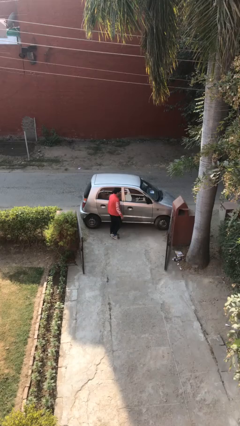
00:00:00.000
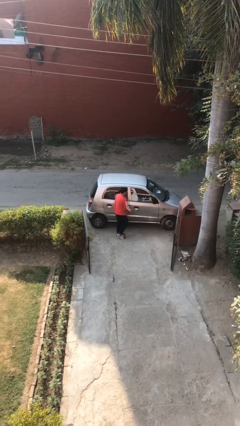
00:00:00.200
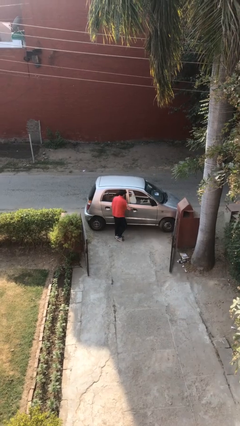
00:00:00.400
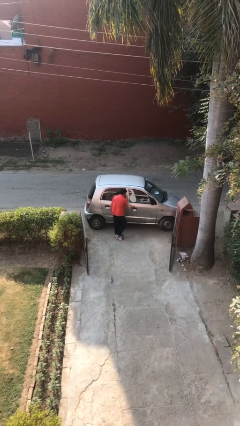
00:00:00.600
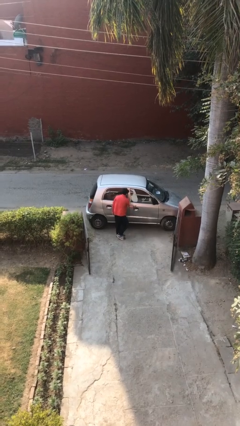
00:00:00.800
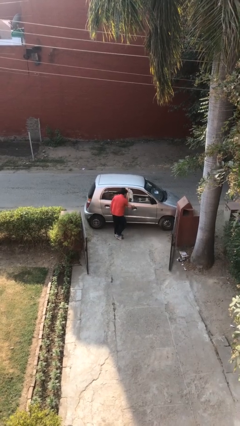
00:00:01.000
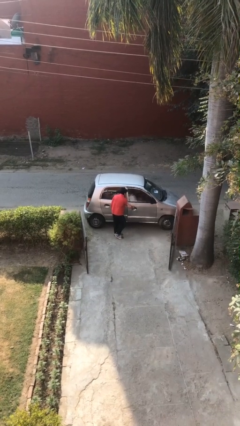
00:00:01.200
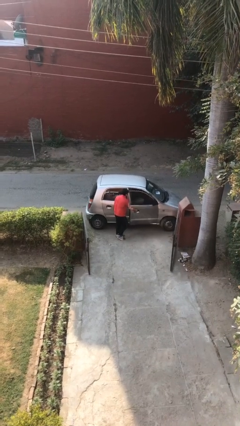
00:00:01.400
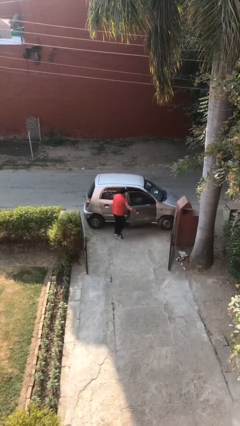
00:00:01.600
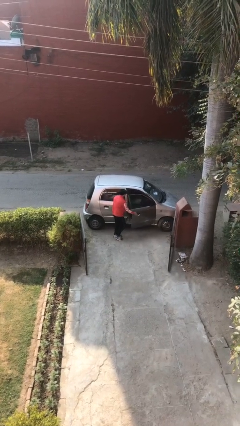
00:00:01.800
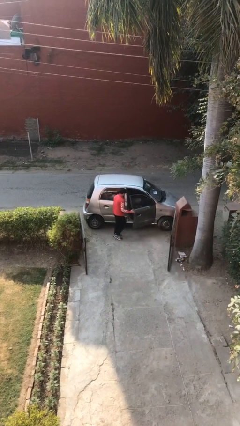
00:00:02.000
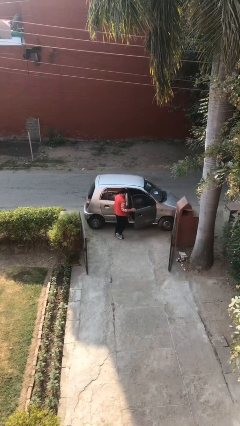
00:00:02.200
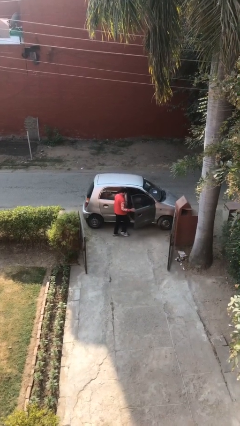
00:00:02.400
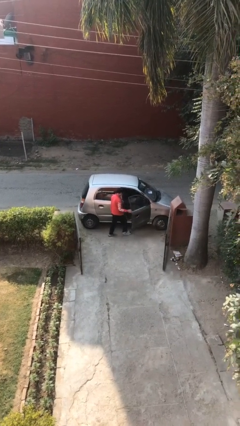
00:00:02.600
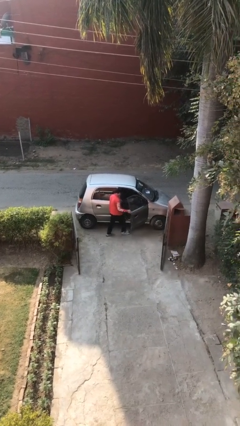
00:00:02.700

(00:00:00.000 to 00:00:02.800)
person opens car door

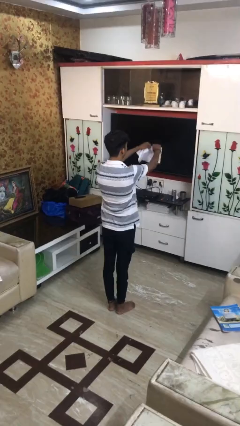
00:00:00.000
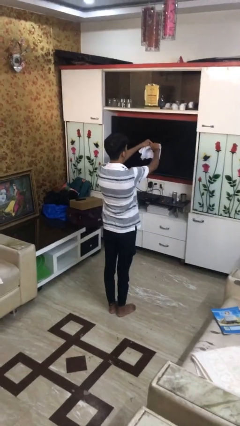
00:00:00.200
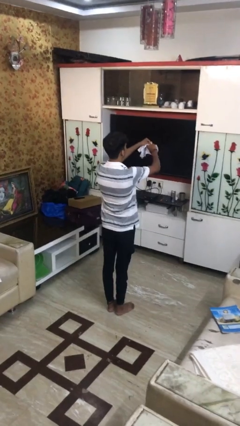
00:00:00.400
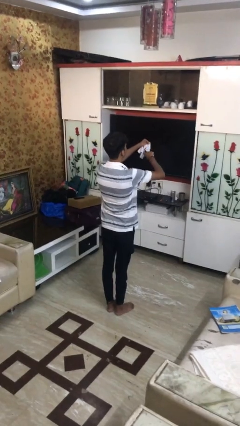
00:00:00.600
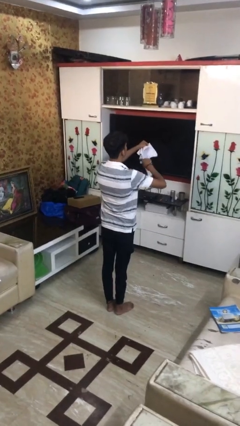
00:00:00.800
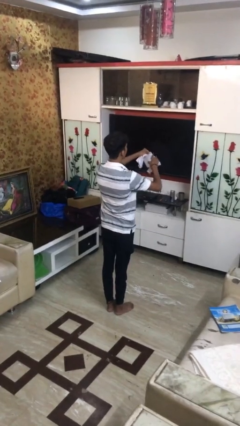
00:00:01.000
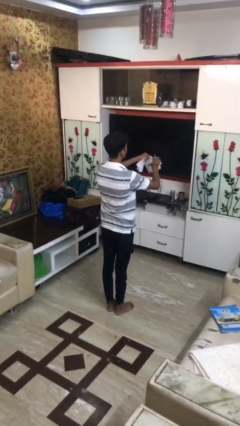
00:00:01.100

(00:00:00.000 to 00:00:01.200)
person tears paper

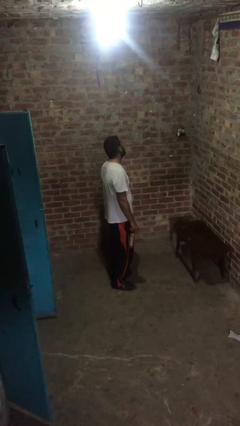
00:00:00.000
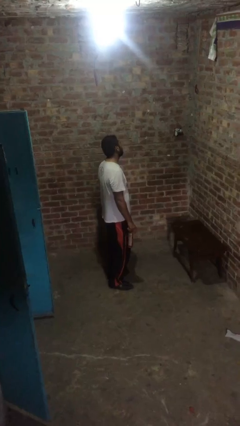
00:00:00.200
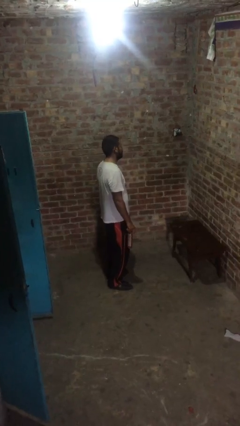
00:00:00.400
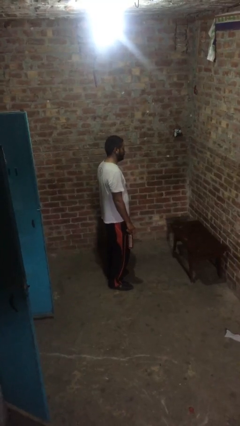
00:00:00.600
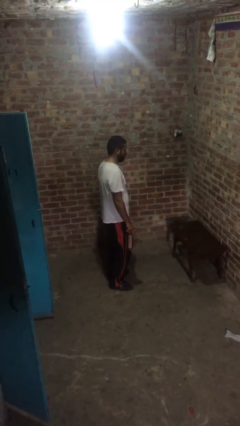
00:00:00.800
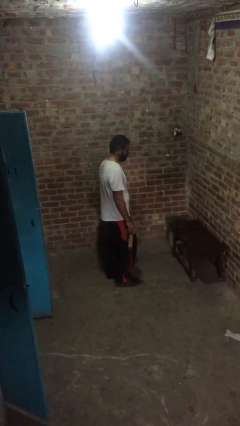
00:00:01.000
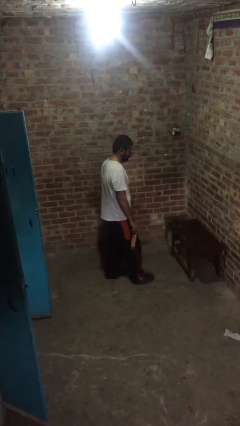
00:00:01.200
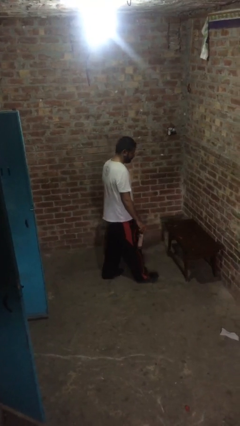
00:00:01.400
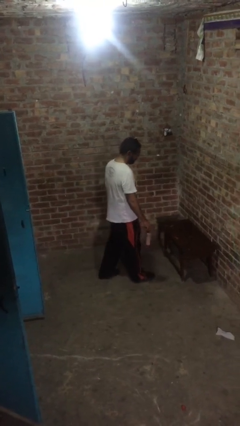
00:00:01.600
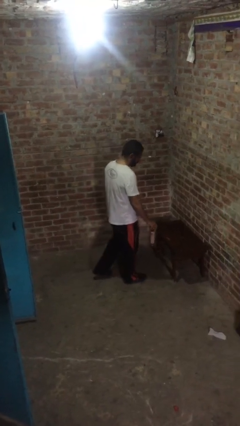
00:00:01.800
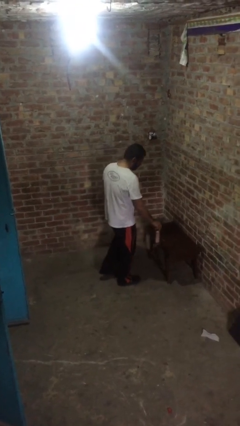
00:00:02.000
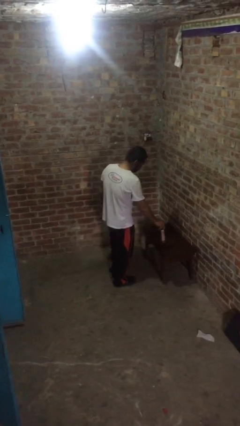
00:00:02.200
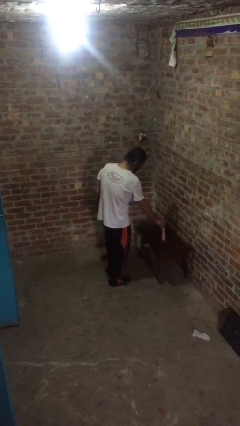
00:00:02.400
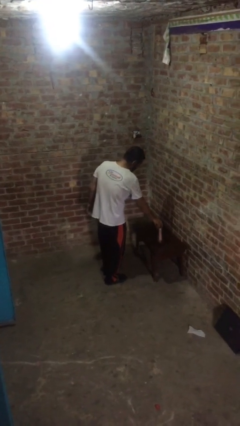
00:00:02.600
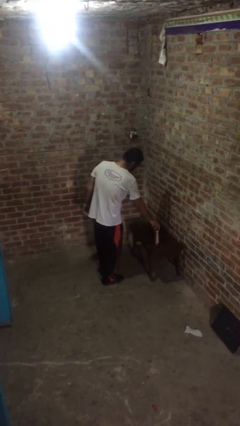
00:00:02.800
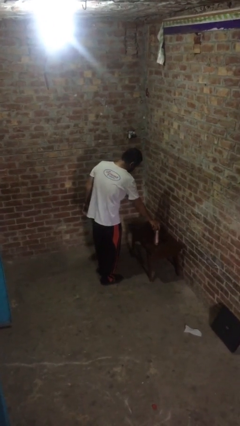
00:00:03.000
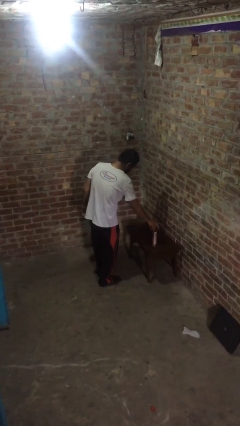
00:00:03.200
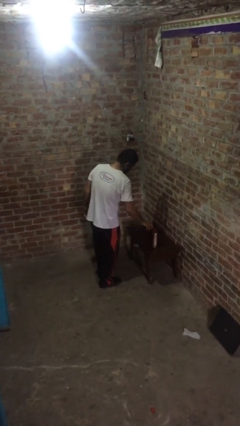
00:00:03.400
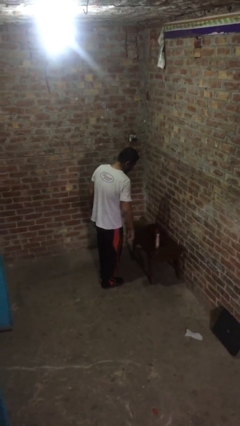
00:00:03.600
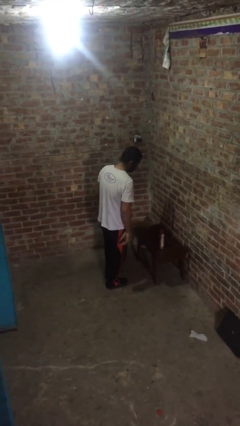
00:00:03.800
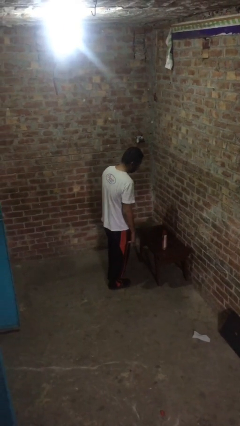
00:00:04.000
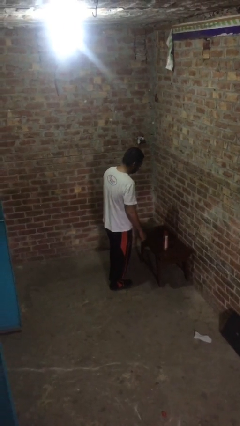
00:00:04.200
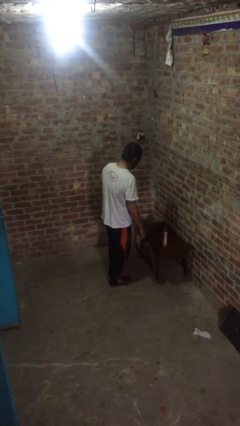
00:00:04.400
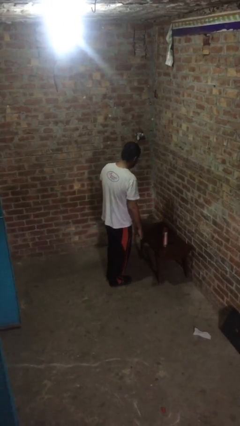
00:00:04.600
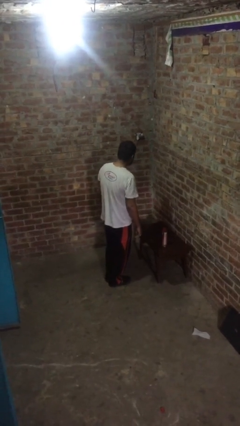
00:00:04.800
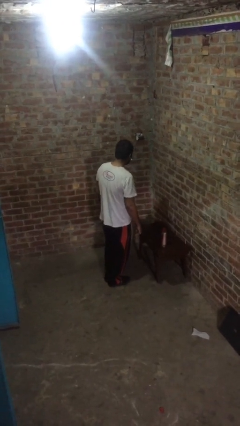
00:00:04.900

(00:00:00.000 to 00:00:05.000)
person puts down object on table

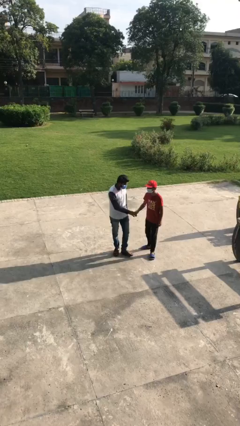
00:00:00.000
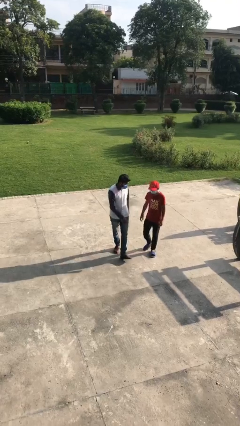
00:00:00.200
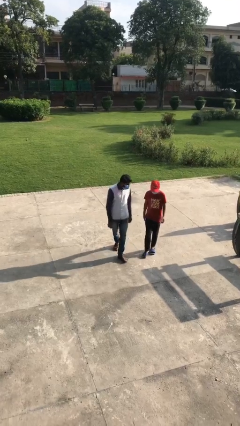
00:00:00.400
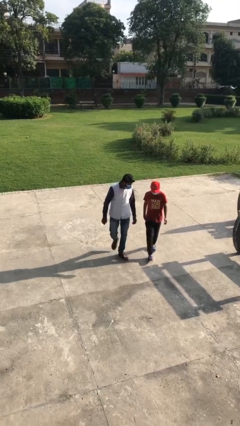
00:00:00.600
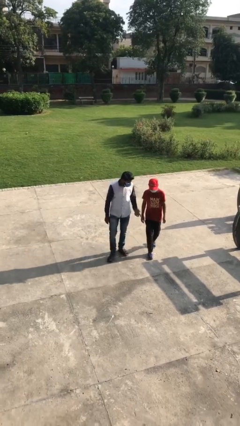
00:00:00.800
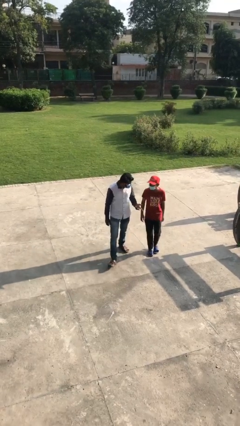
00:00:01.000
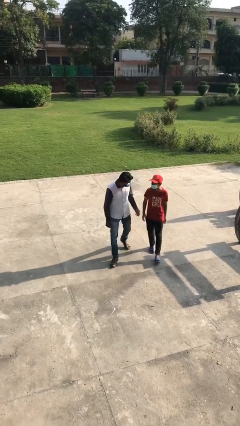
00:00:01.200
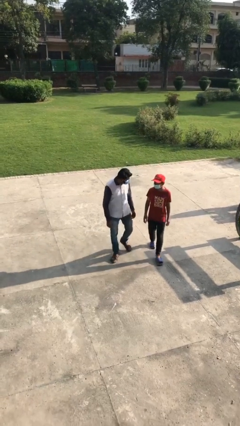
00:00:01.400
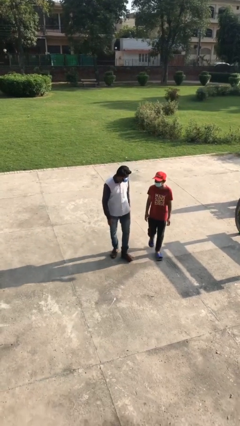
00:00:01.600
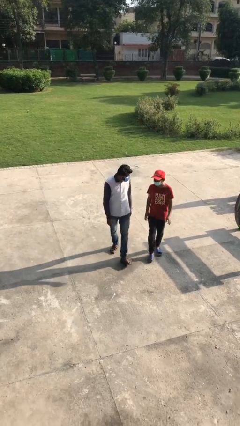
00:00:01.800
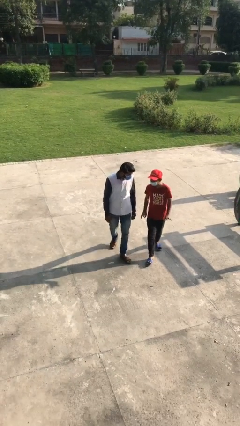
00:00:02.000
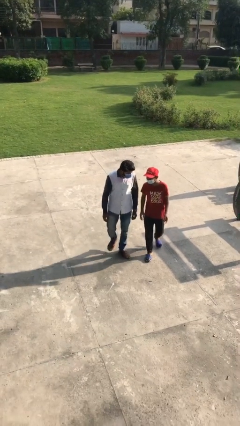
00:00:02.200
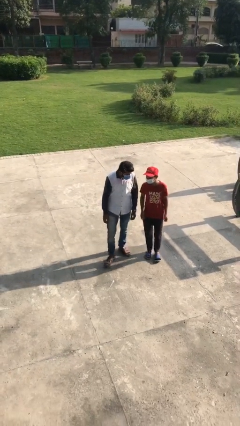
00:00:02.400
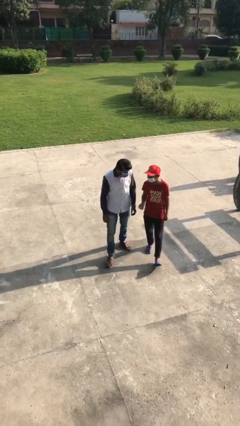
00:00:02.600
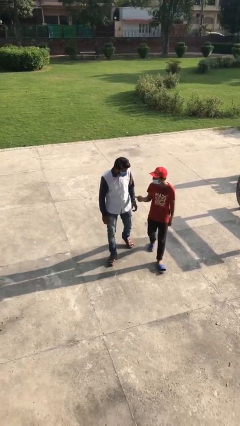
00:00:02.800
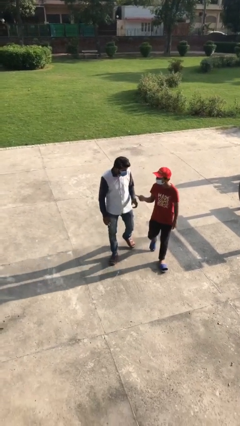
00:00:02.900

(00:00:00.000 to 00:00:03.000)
person talks to person

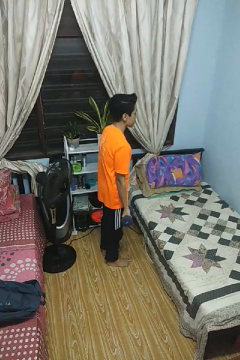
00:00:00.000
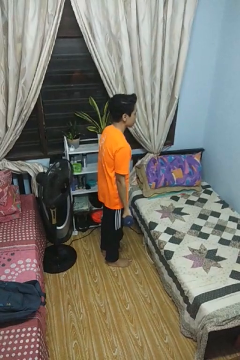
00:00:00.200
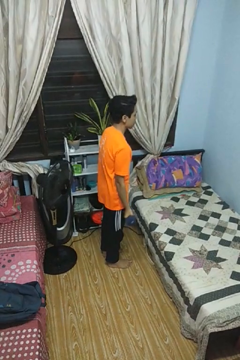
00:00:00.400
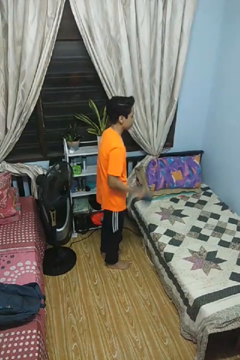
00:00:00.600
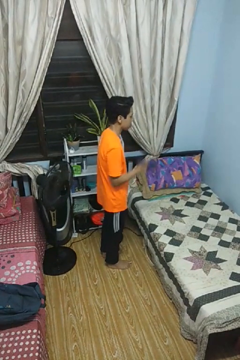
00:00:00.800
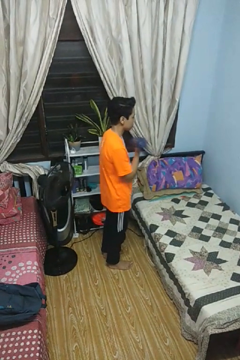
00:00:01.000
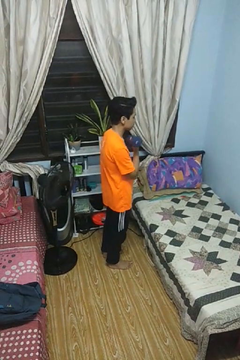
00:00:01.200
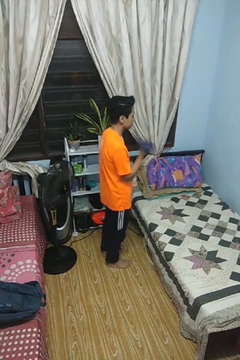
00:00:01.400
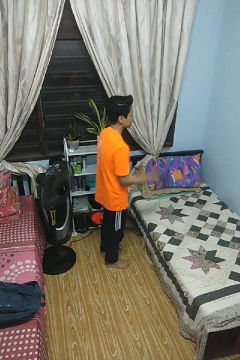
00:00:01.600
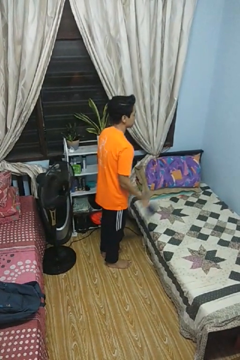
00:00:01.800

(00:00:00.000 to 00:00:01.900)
person lifts dumbbells

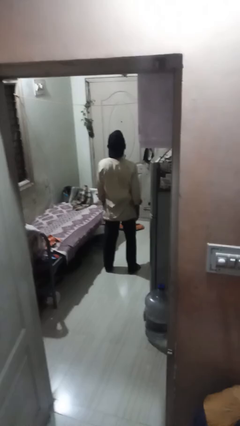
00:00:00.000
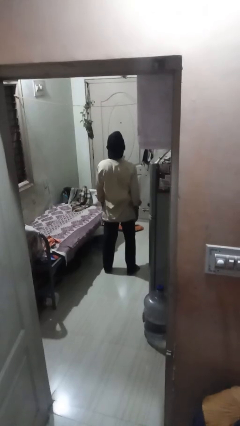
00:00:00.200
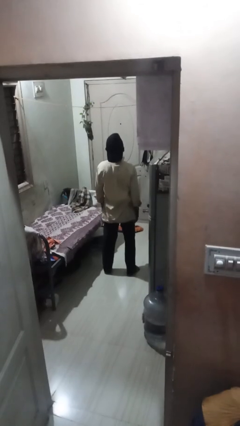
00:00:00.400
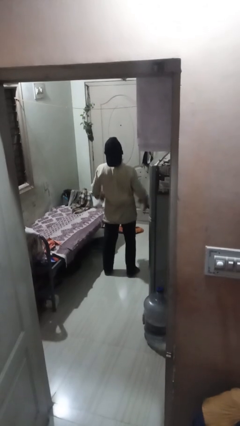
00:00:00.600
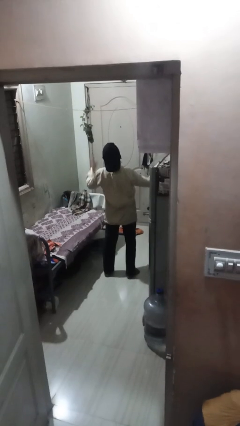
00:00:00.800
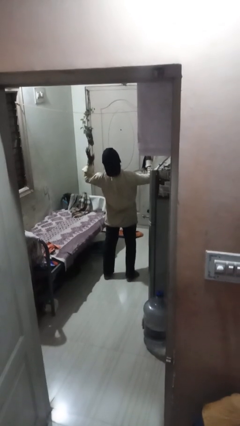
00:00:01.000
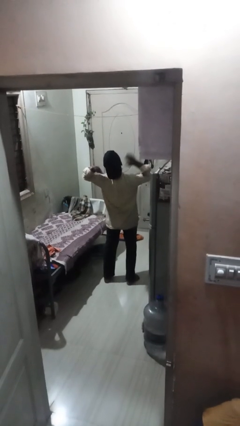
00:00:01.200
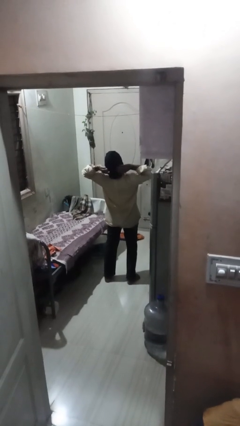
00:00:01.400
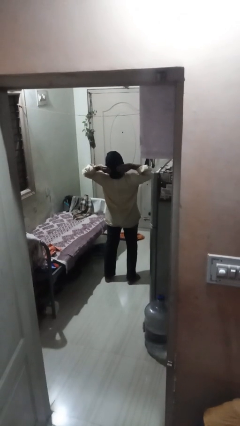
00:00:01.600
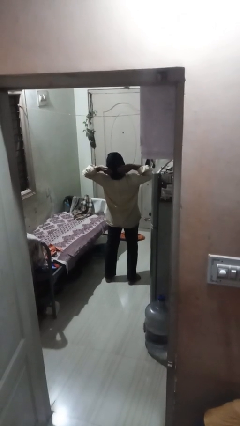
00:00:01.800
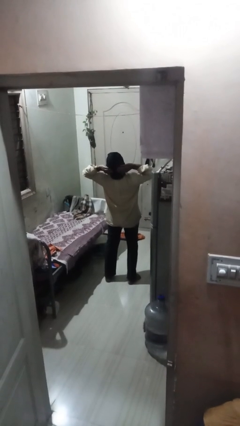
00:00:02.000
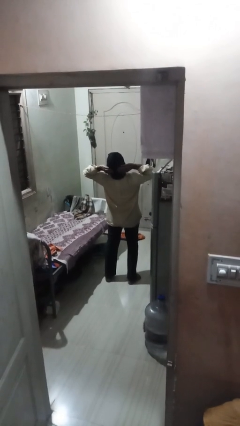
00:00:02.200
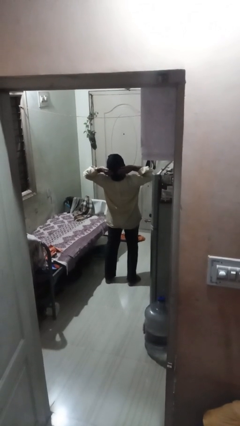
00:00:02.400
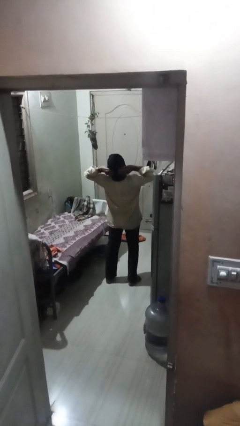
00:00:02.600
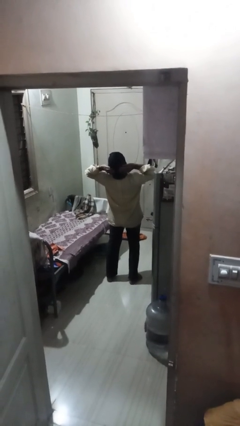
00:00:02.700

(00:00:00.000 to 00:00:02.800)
person stretches arms over head

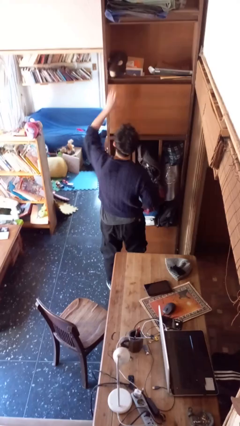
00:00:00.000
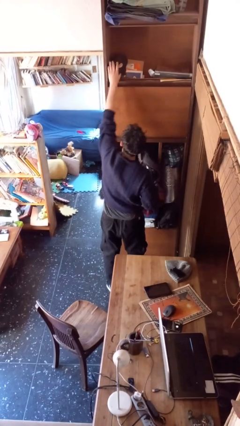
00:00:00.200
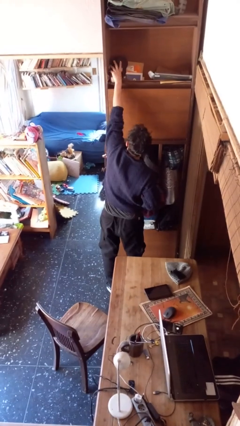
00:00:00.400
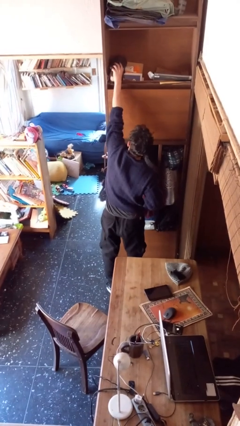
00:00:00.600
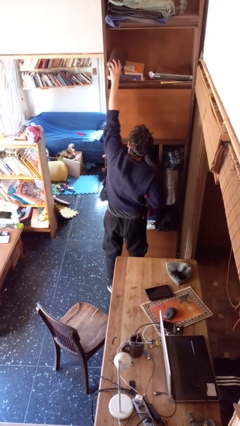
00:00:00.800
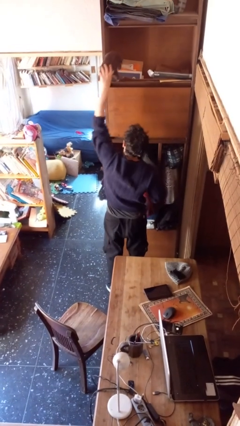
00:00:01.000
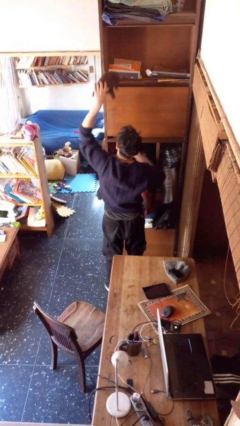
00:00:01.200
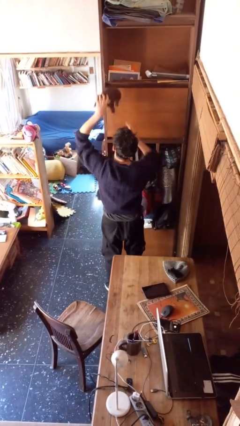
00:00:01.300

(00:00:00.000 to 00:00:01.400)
person picks up object from shelf
